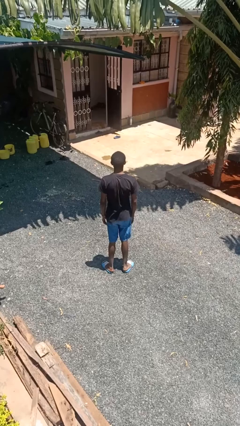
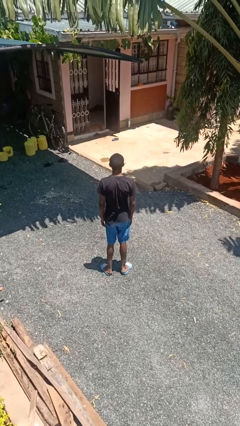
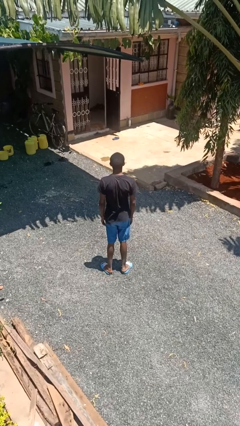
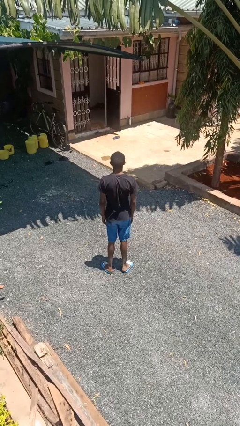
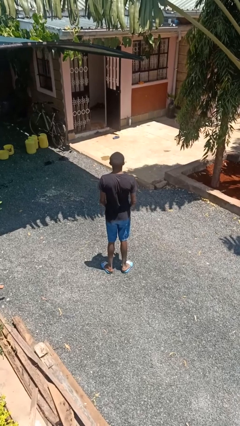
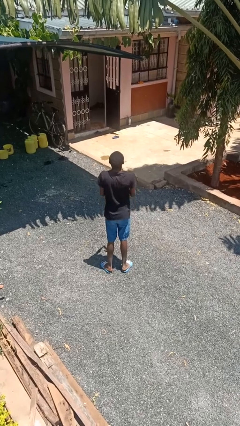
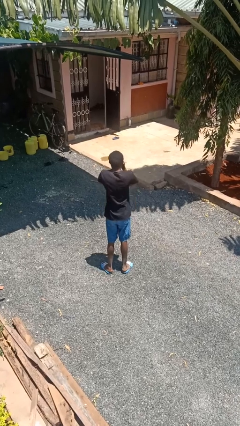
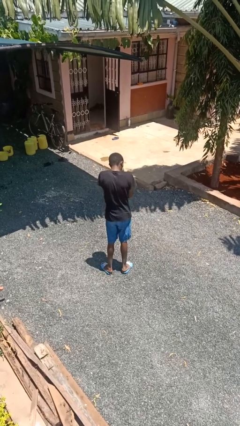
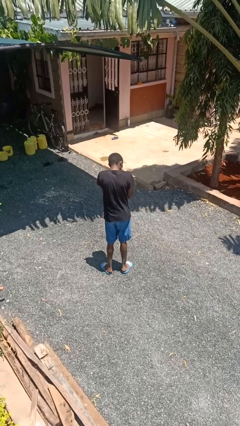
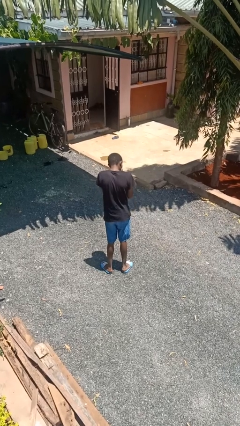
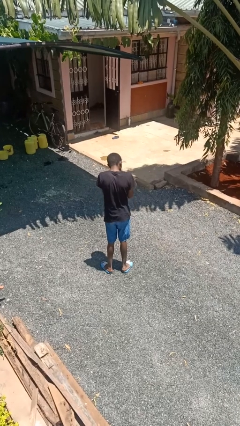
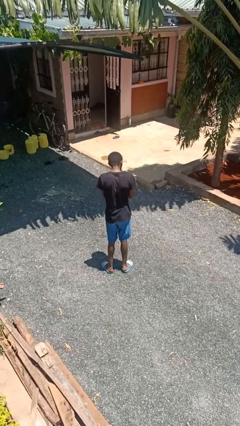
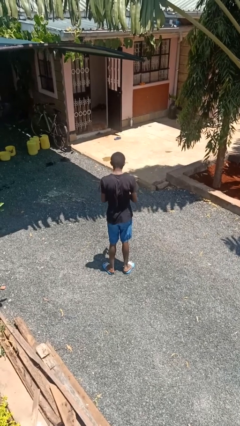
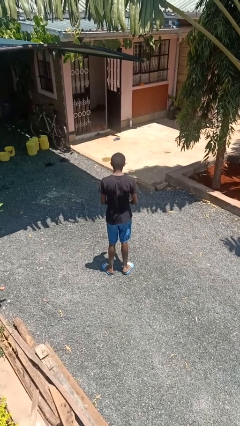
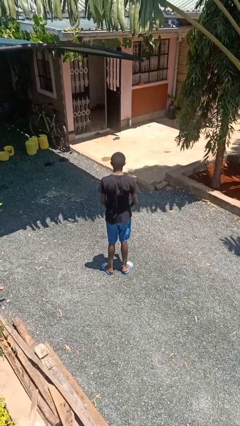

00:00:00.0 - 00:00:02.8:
person sneezes into hand

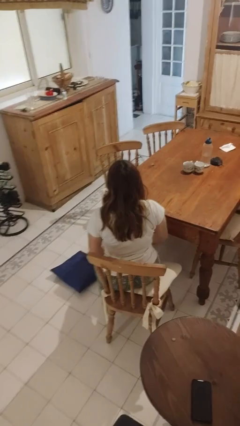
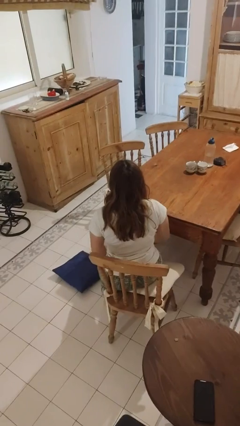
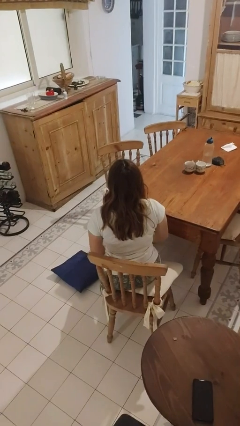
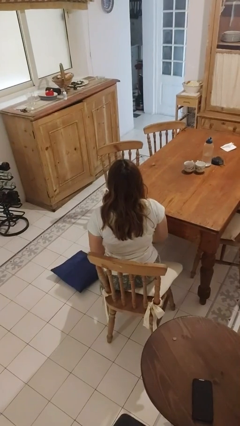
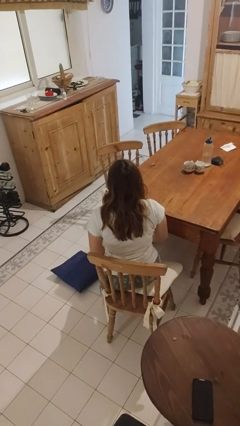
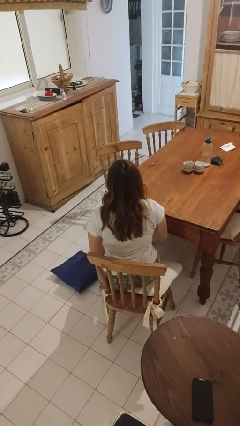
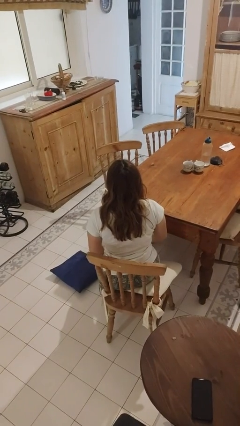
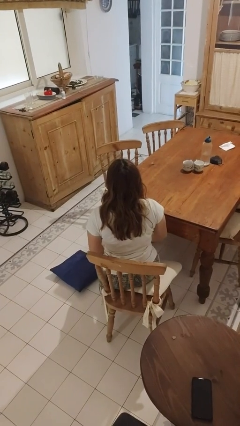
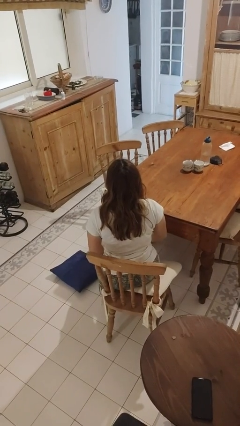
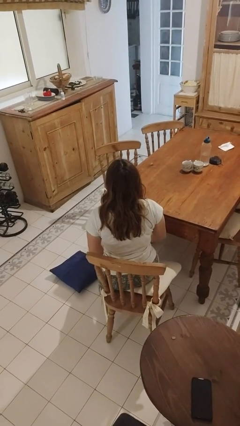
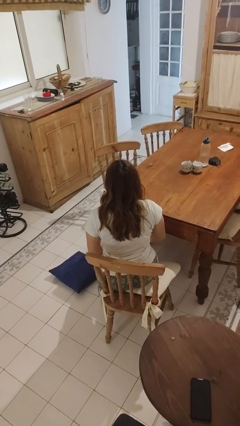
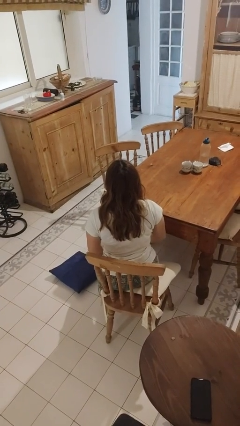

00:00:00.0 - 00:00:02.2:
person falls from chair

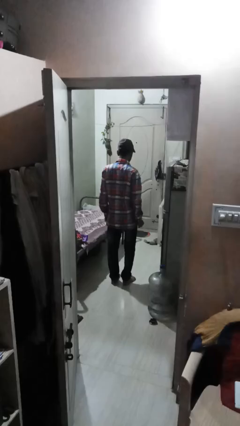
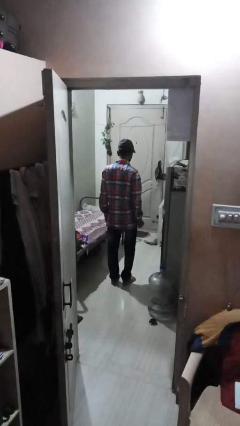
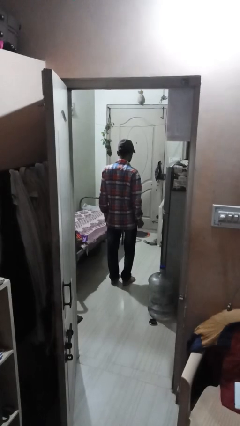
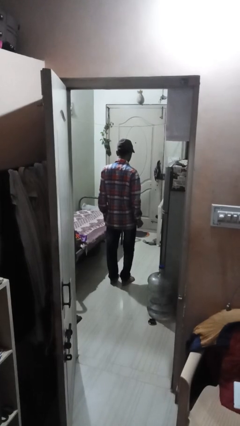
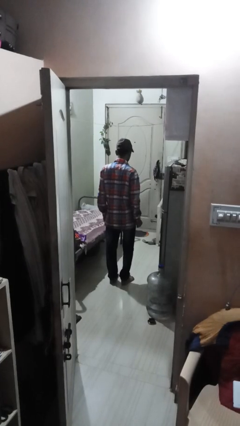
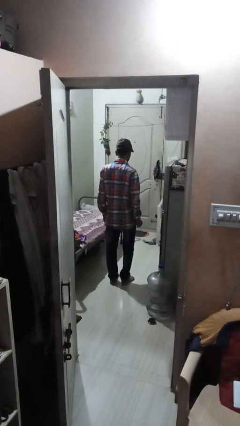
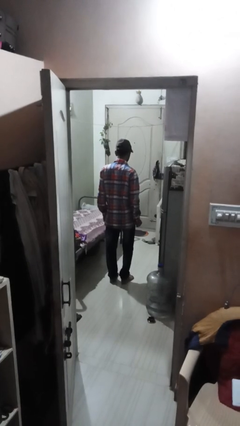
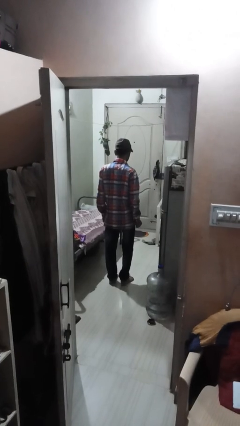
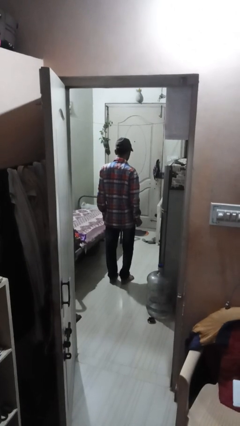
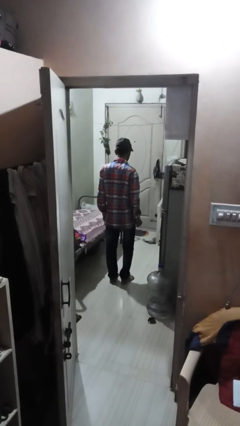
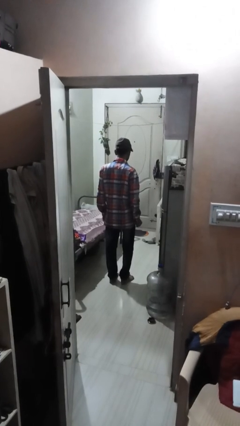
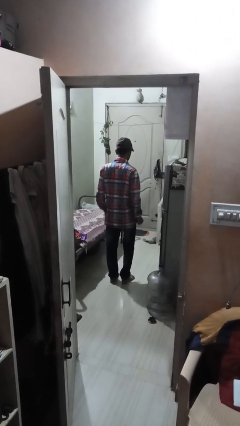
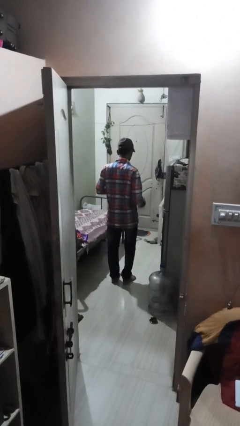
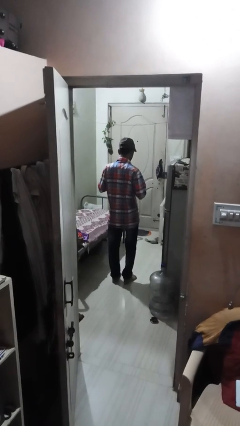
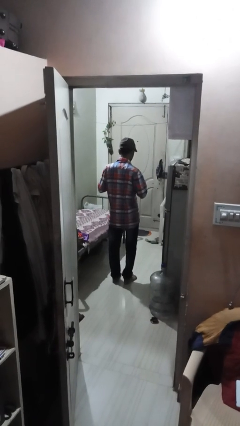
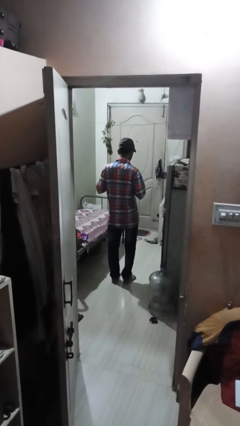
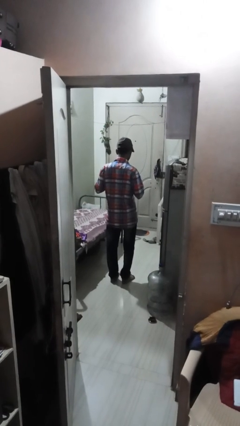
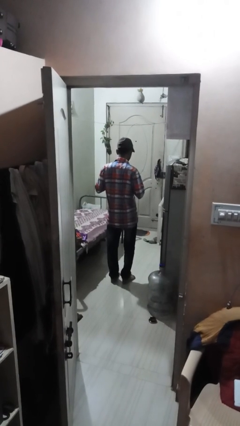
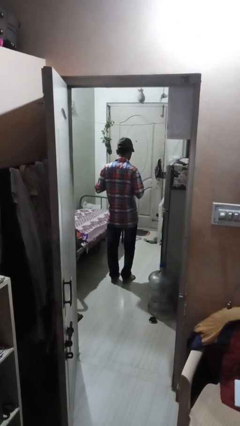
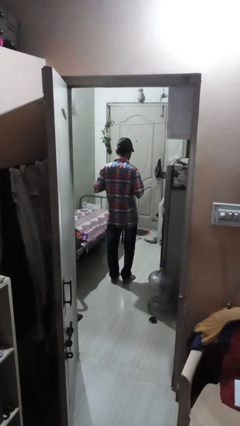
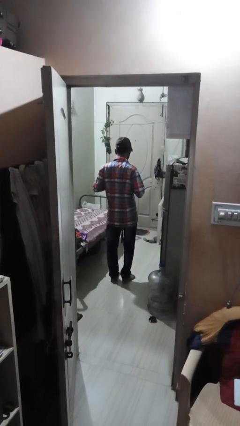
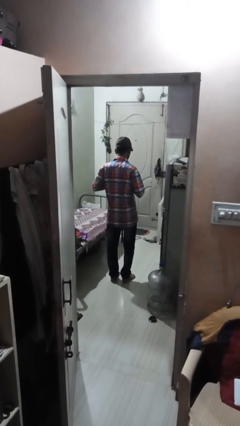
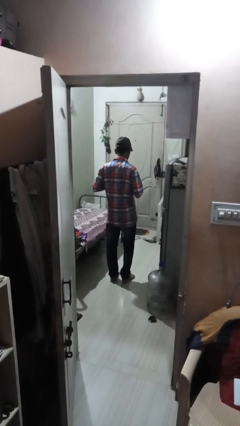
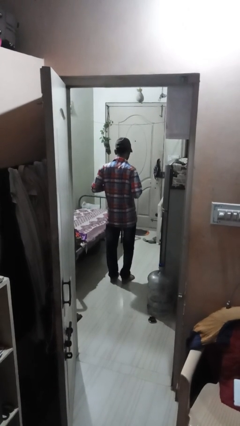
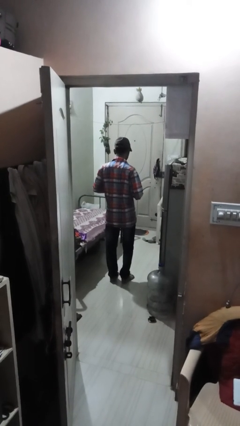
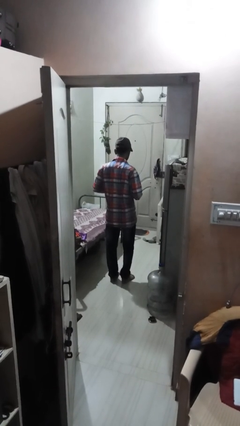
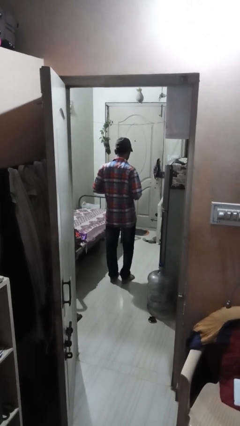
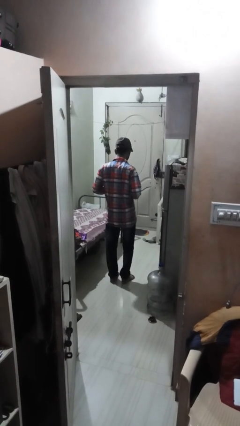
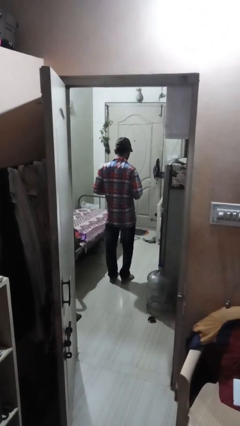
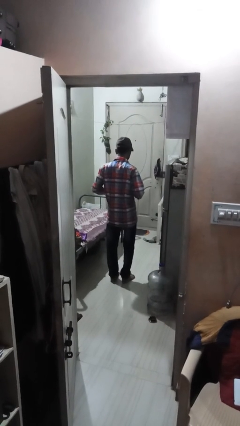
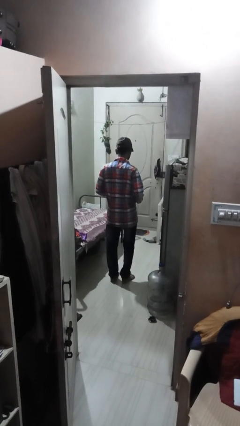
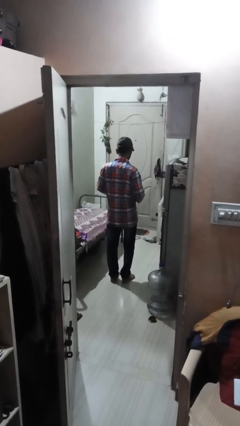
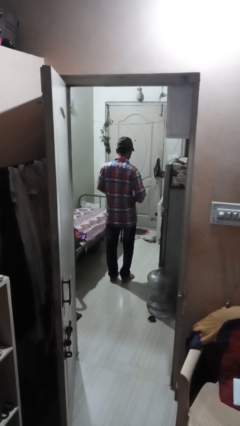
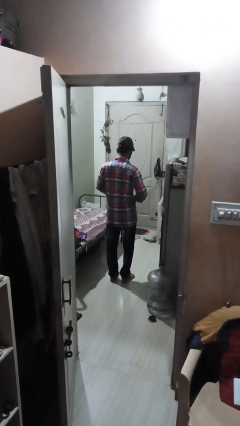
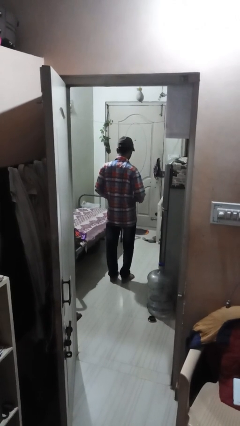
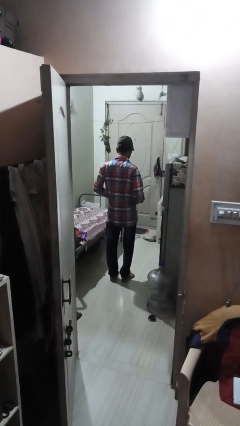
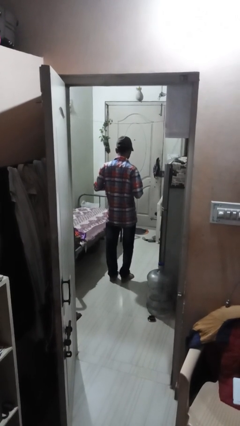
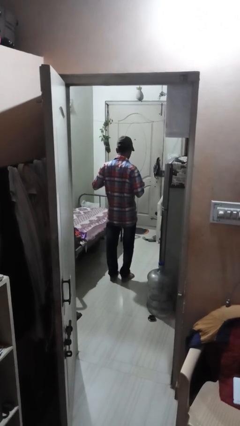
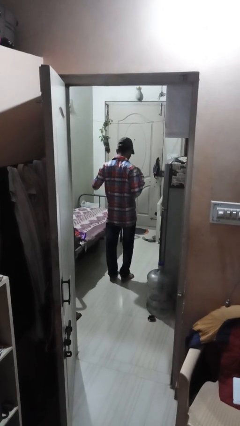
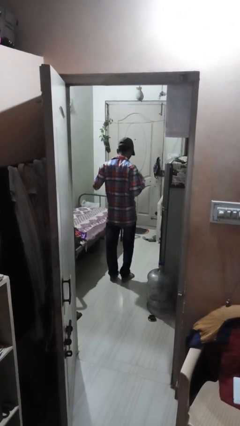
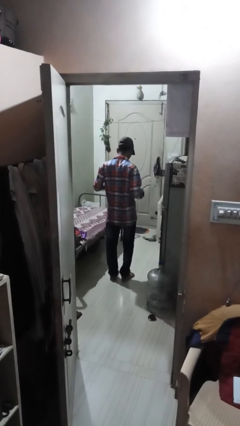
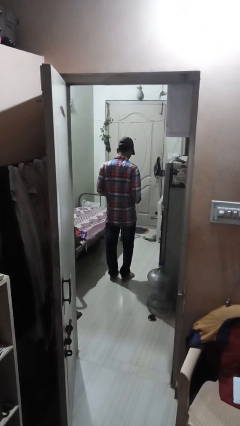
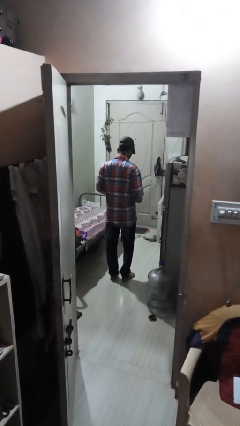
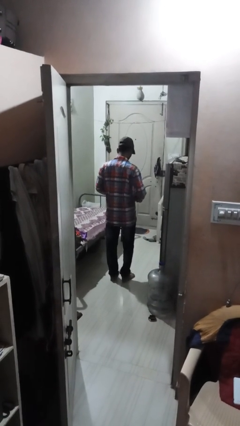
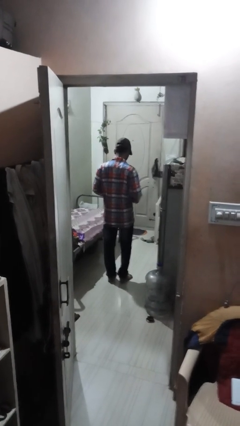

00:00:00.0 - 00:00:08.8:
person unbuttons shirt

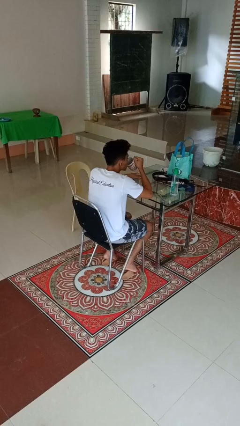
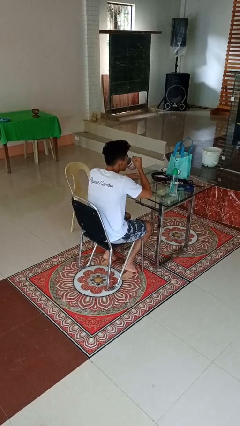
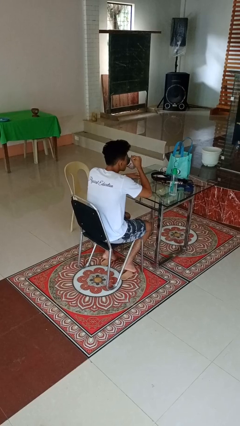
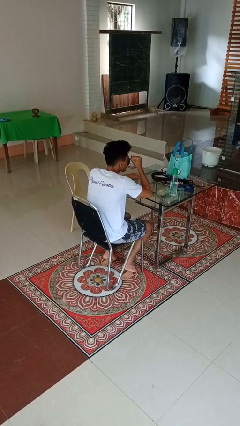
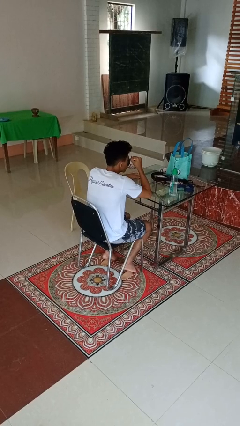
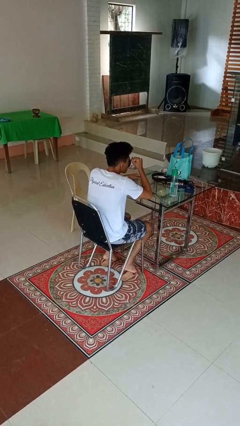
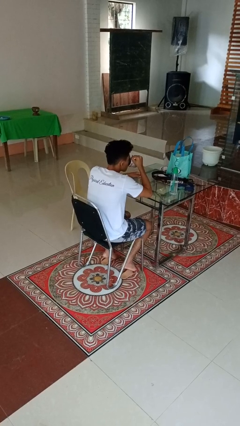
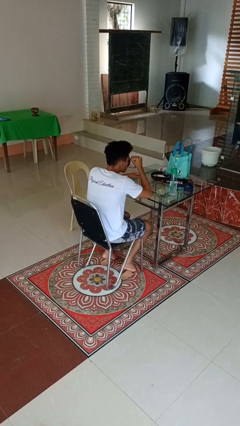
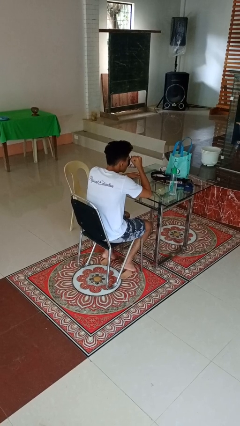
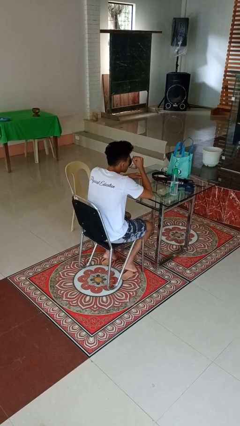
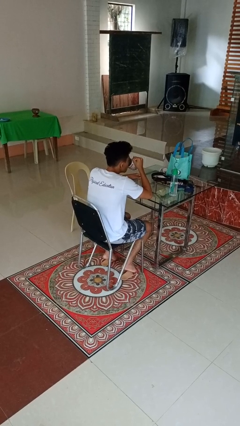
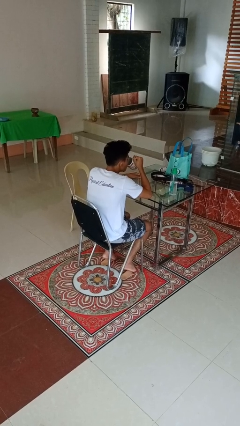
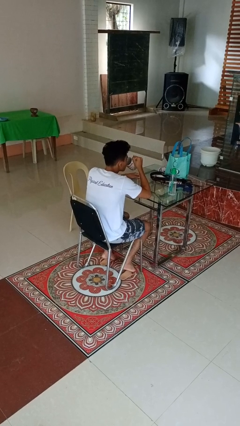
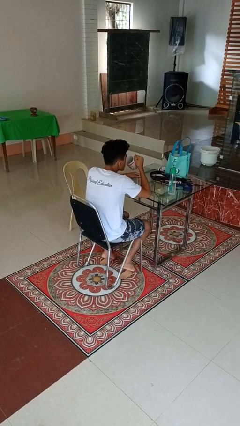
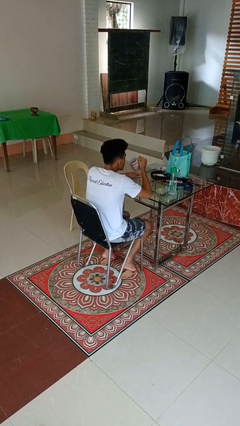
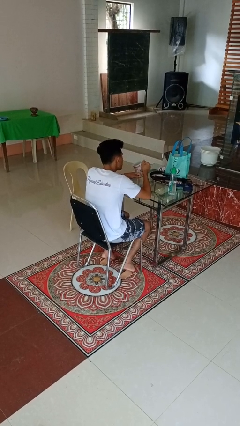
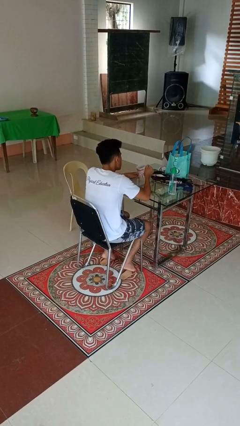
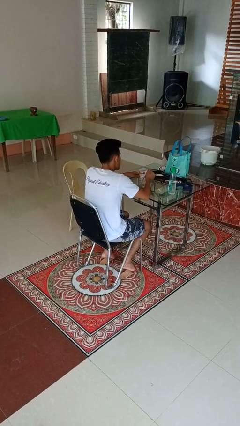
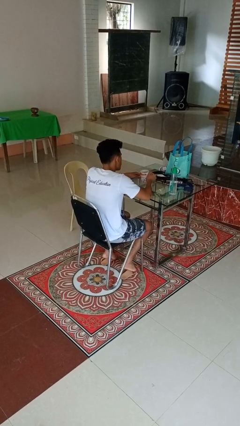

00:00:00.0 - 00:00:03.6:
person drinks from mug

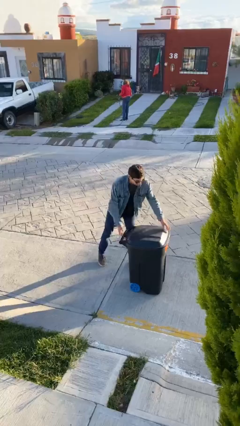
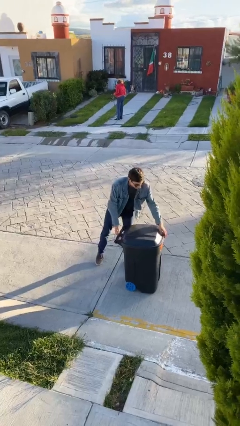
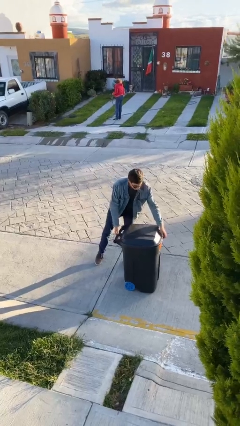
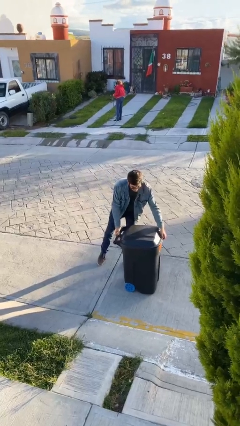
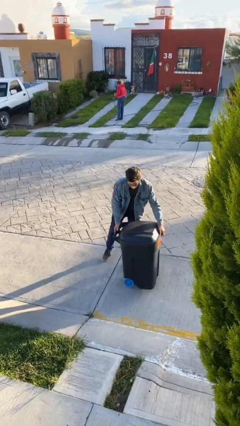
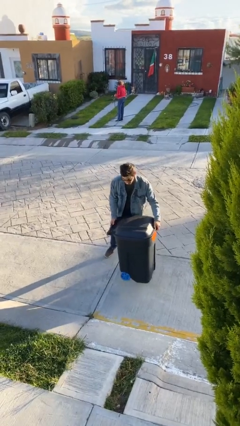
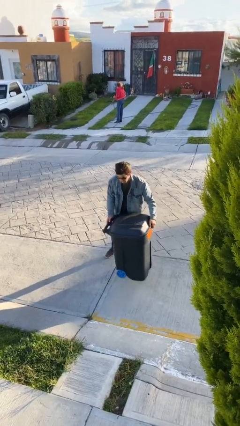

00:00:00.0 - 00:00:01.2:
person picks up object from floor
